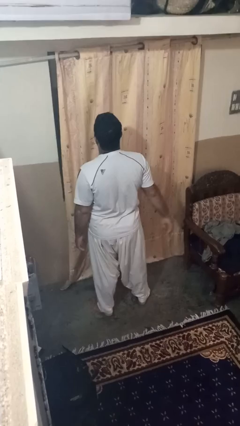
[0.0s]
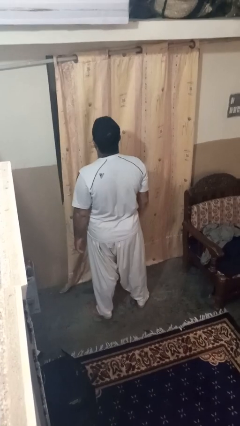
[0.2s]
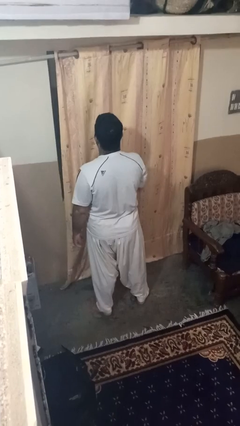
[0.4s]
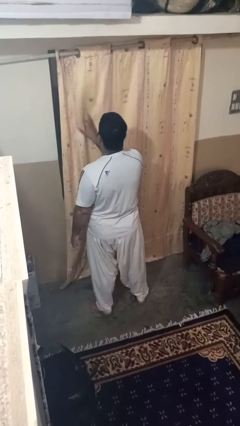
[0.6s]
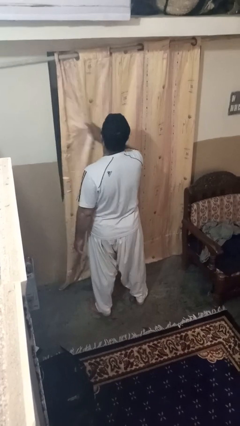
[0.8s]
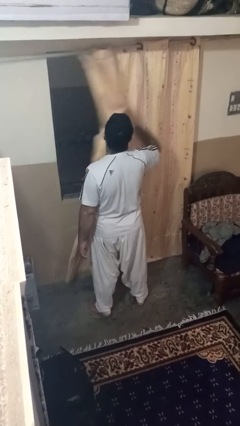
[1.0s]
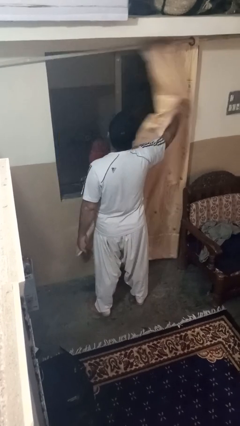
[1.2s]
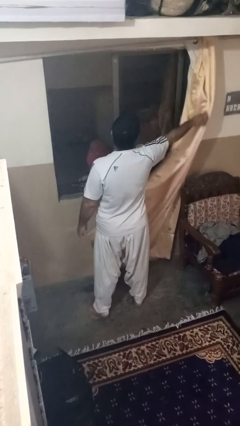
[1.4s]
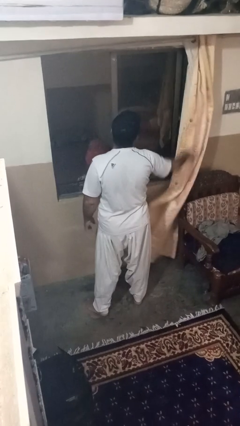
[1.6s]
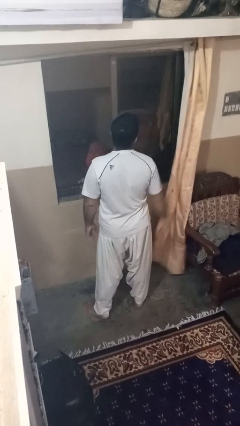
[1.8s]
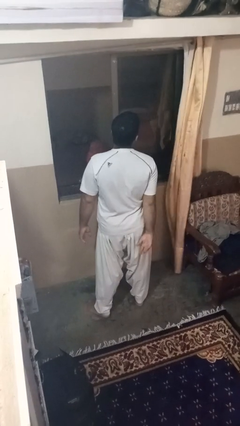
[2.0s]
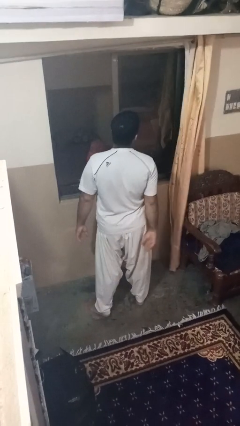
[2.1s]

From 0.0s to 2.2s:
person opens curtains

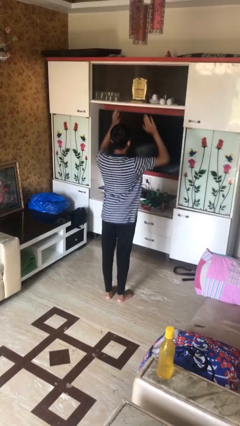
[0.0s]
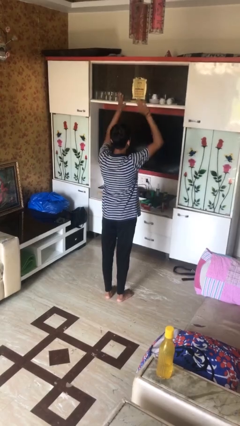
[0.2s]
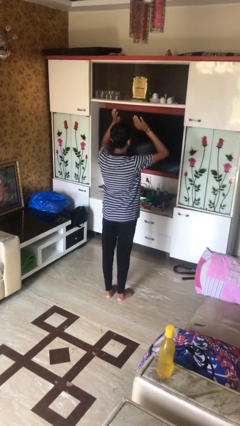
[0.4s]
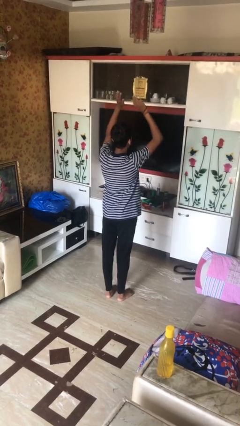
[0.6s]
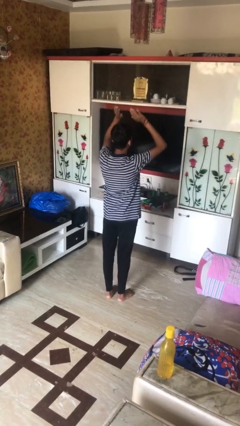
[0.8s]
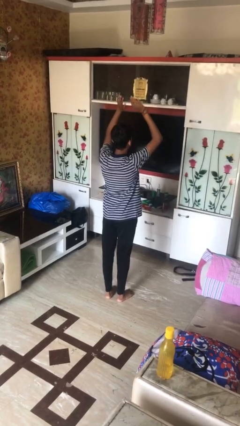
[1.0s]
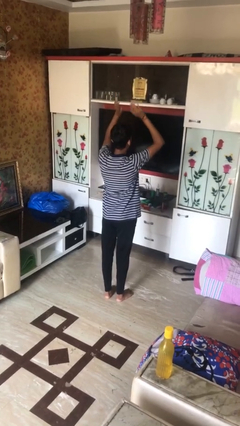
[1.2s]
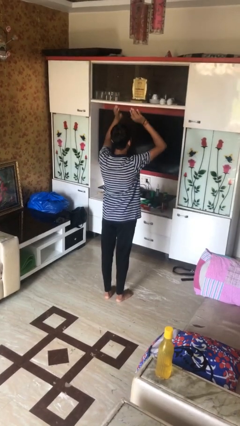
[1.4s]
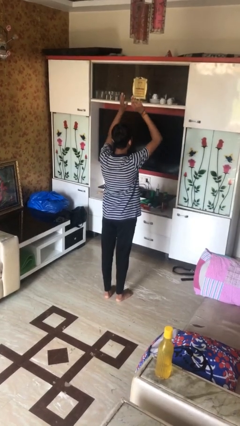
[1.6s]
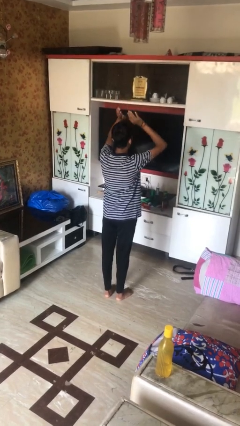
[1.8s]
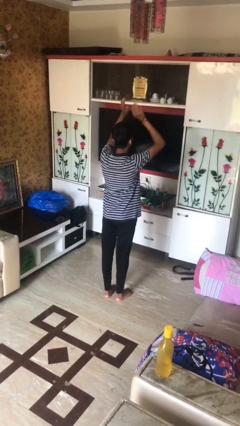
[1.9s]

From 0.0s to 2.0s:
person dances in place

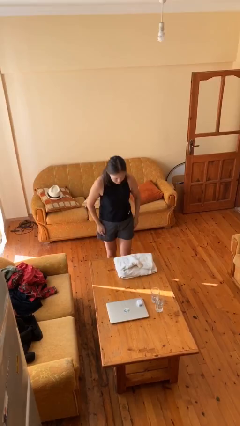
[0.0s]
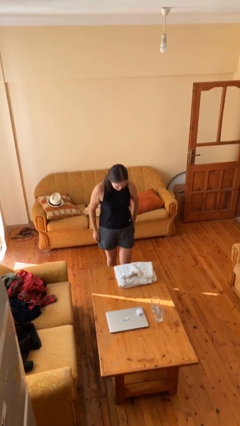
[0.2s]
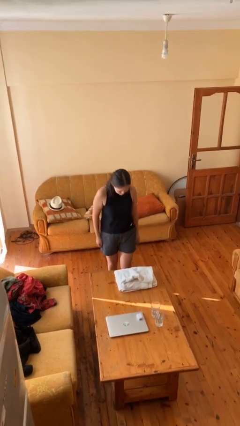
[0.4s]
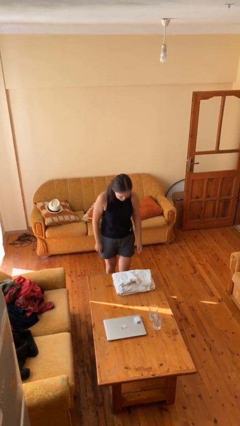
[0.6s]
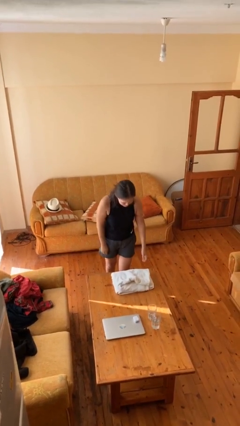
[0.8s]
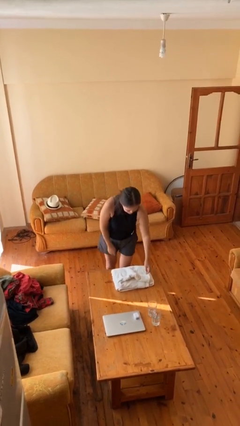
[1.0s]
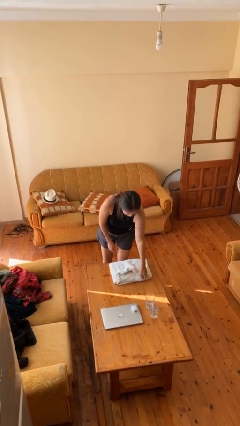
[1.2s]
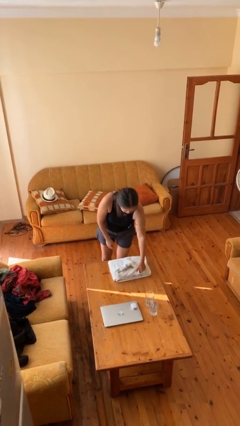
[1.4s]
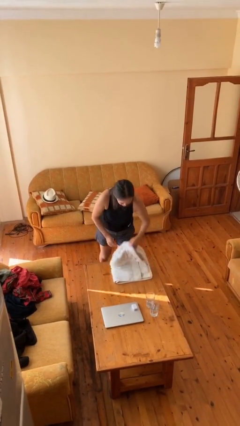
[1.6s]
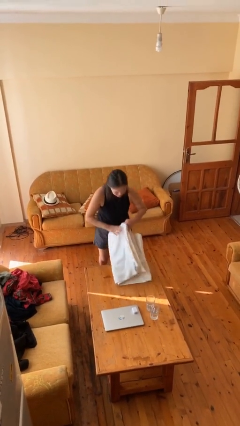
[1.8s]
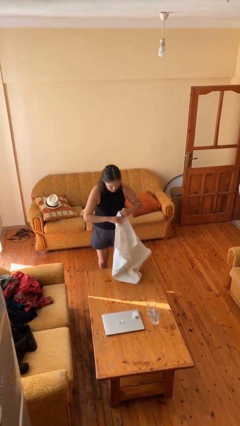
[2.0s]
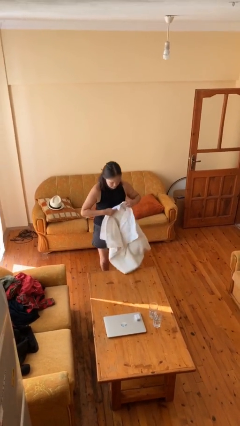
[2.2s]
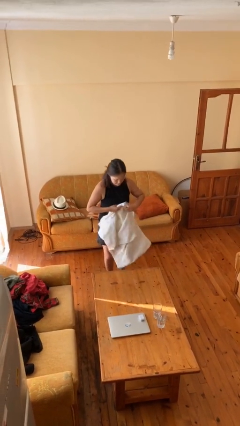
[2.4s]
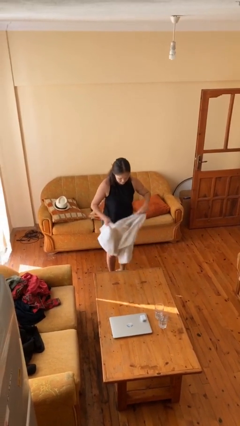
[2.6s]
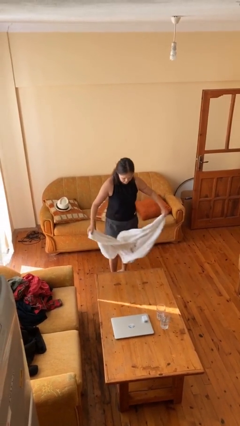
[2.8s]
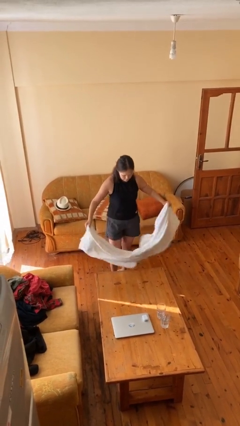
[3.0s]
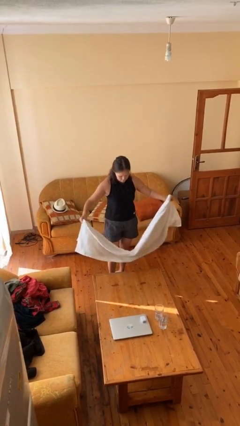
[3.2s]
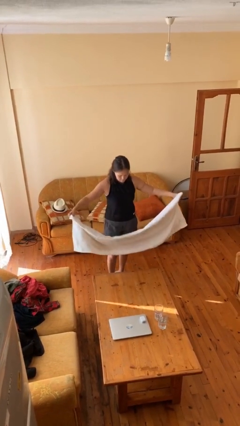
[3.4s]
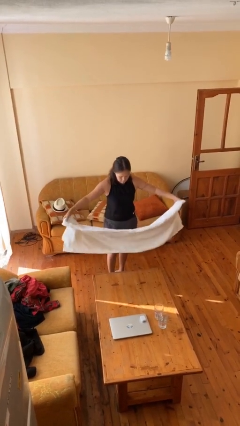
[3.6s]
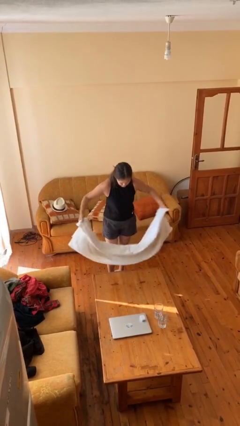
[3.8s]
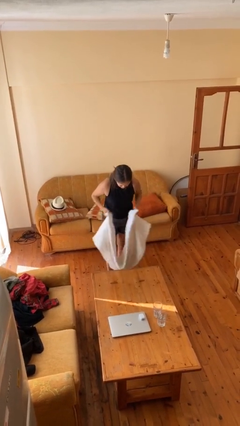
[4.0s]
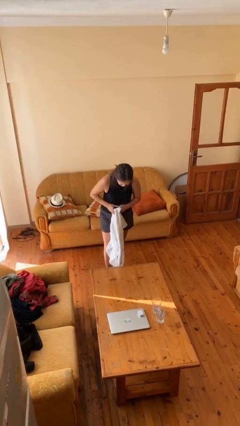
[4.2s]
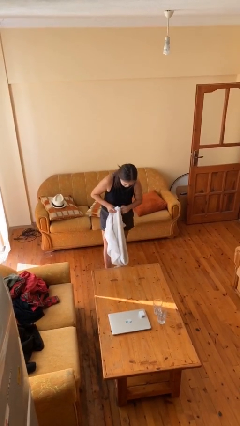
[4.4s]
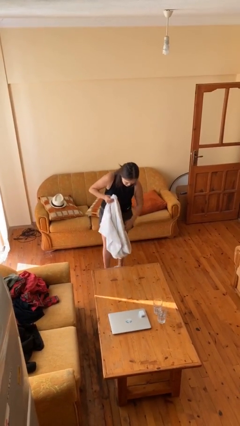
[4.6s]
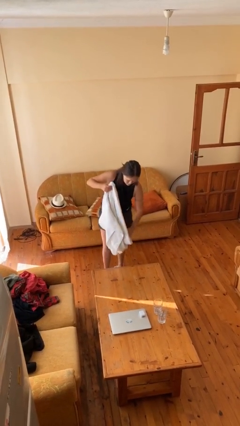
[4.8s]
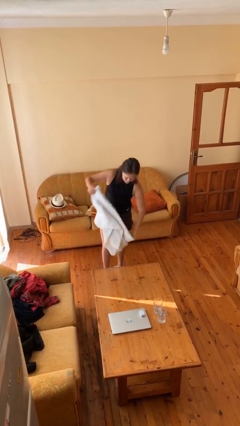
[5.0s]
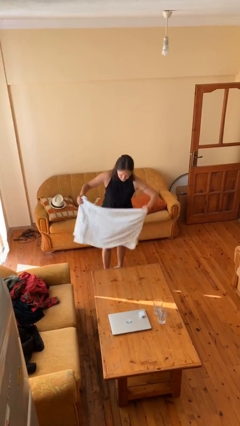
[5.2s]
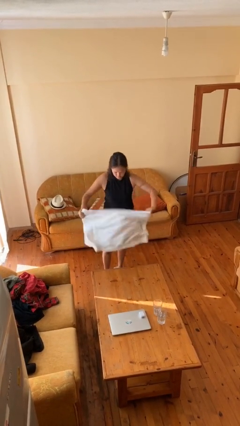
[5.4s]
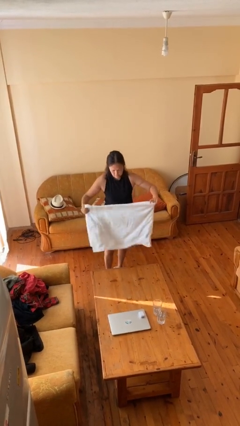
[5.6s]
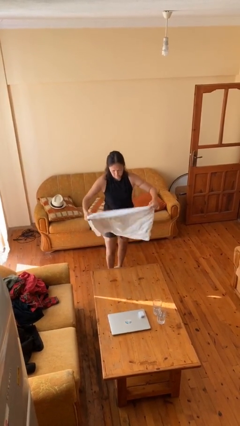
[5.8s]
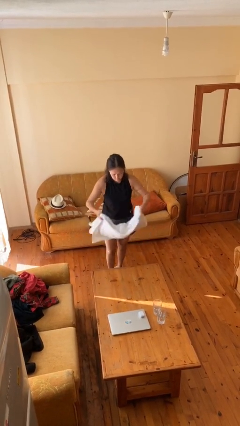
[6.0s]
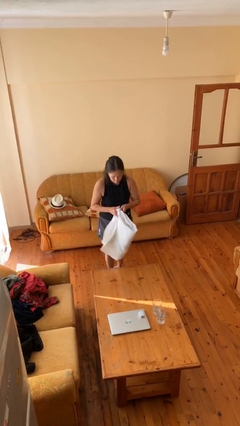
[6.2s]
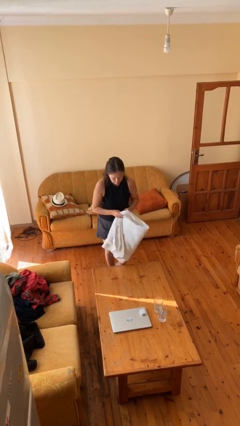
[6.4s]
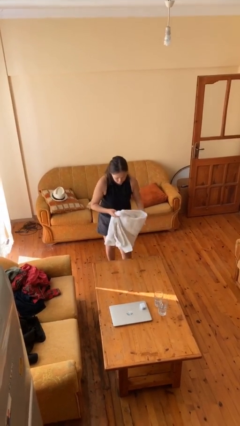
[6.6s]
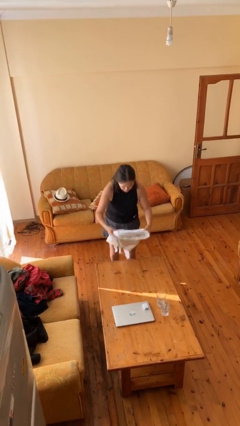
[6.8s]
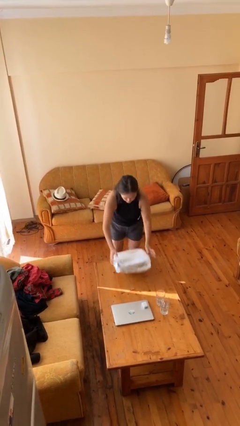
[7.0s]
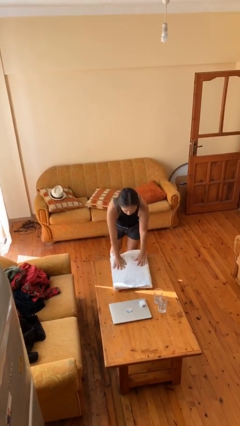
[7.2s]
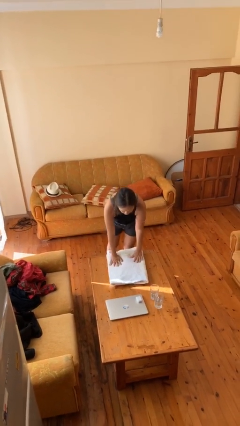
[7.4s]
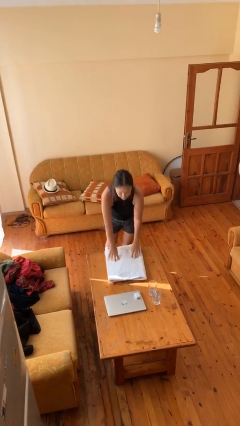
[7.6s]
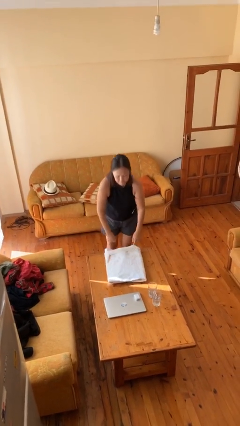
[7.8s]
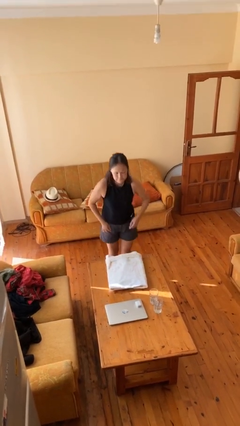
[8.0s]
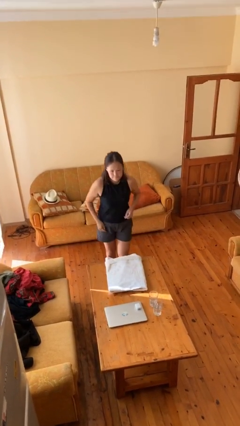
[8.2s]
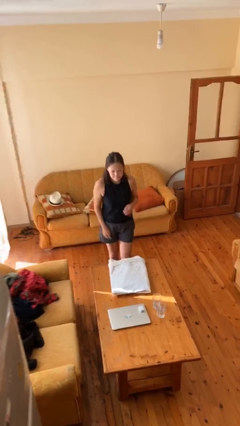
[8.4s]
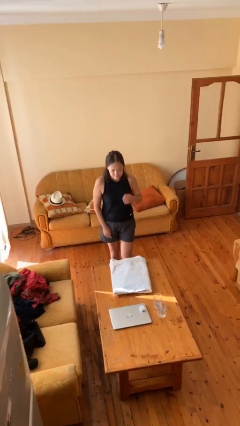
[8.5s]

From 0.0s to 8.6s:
person folds towel

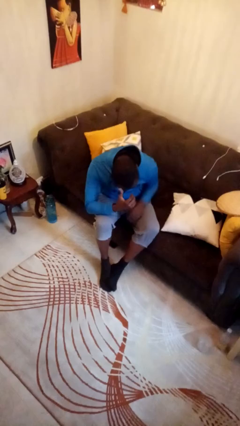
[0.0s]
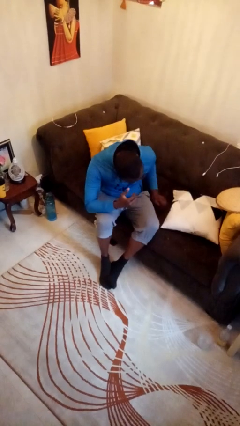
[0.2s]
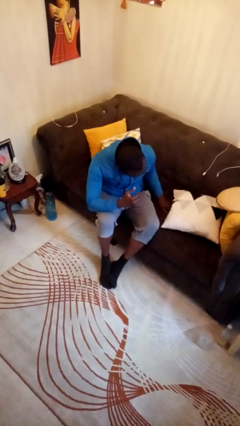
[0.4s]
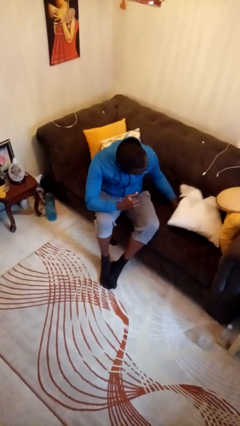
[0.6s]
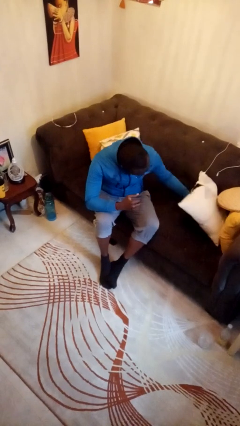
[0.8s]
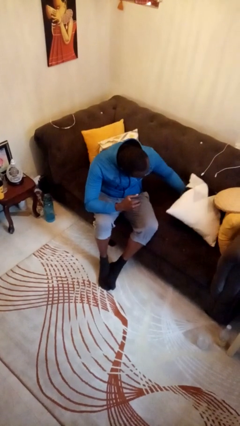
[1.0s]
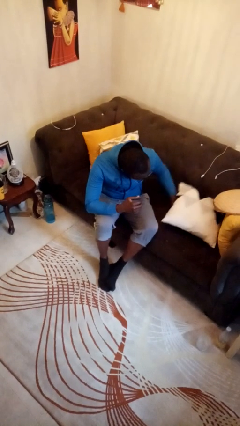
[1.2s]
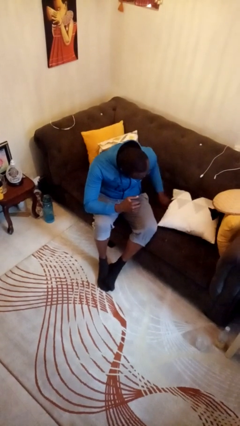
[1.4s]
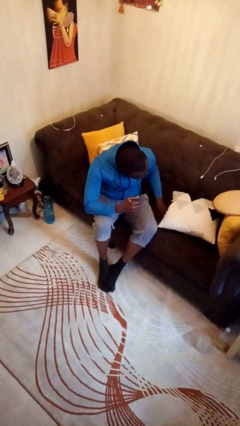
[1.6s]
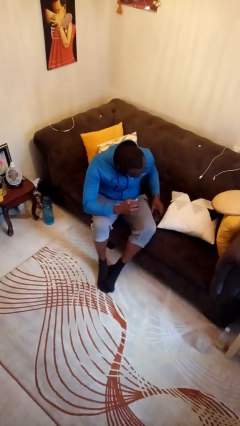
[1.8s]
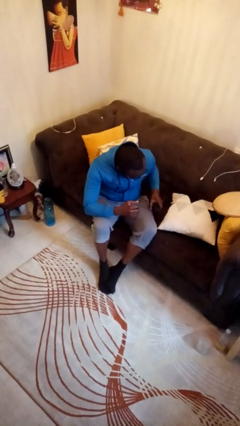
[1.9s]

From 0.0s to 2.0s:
person searches under couch

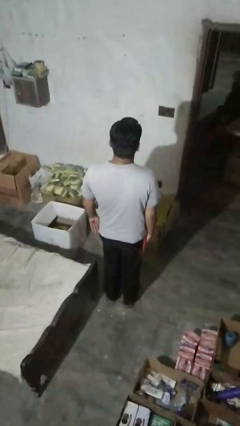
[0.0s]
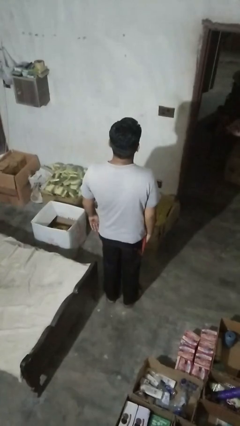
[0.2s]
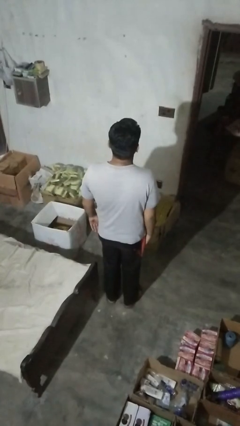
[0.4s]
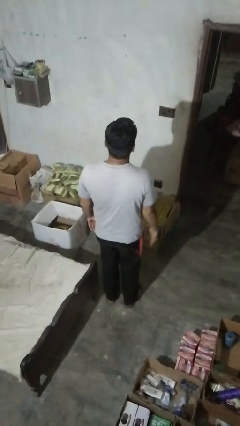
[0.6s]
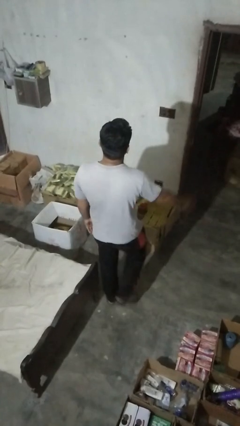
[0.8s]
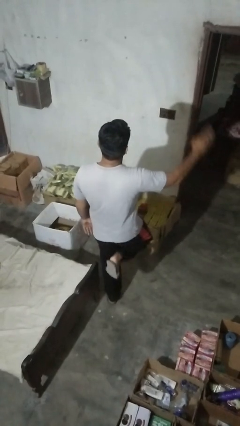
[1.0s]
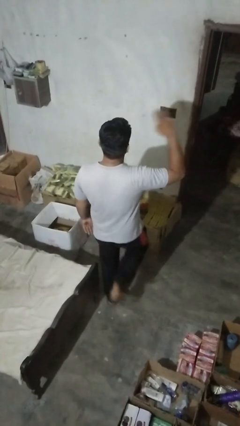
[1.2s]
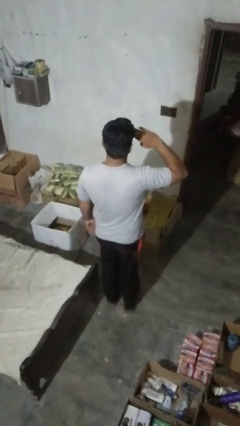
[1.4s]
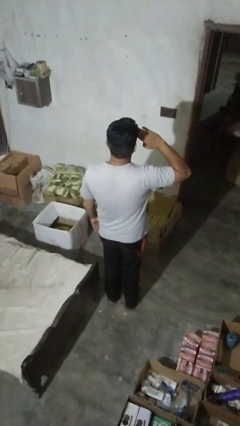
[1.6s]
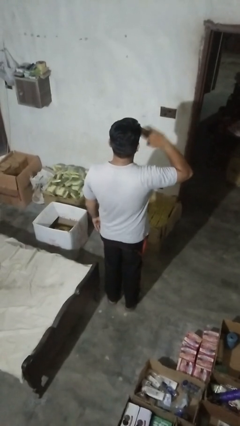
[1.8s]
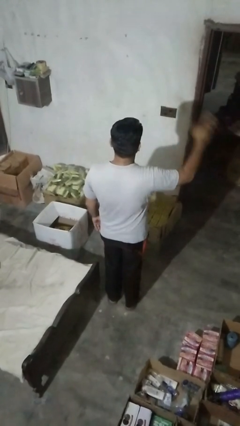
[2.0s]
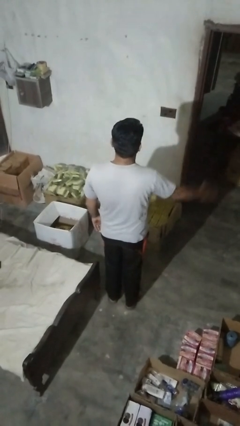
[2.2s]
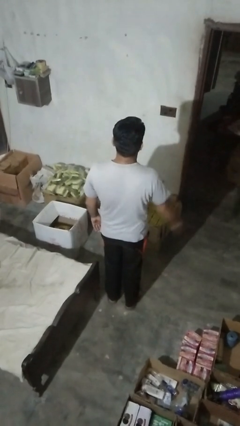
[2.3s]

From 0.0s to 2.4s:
person salutes

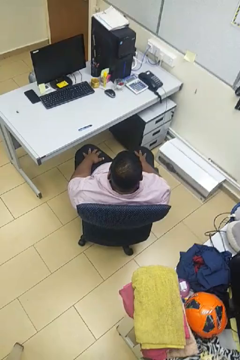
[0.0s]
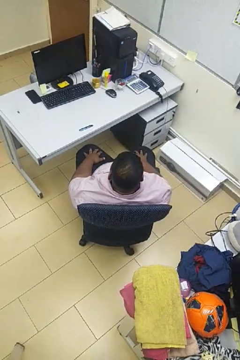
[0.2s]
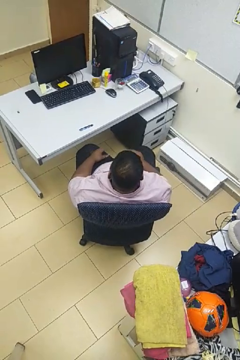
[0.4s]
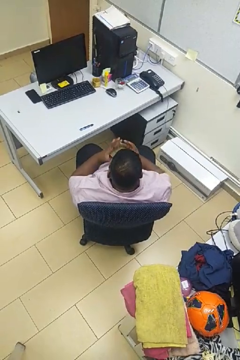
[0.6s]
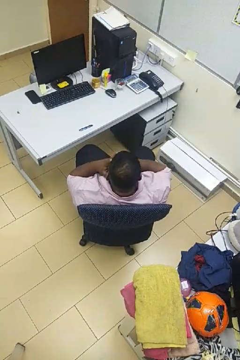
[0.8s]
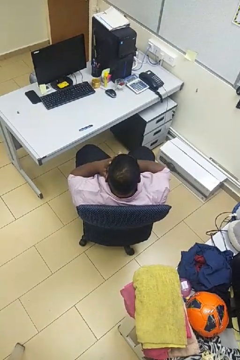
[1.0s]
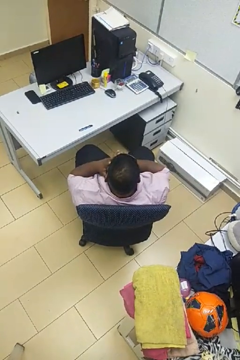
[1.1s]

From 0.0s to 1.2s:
person covers face with hands
